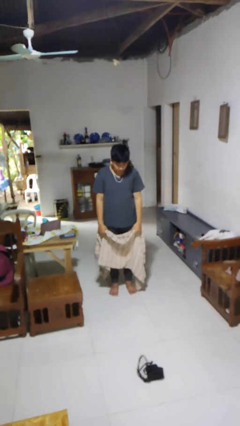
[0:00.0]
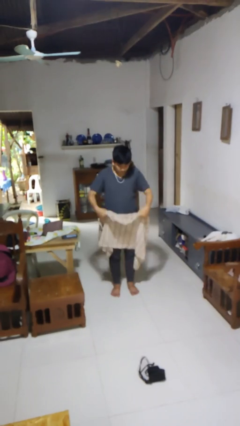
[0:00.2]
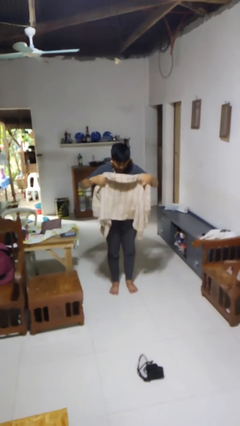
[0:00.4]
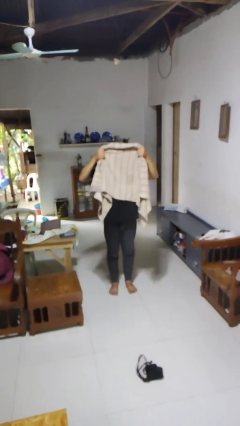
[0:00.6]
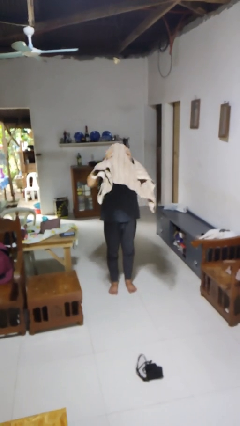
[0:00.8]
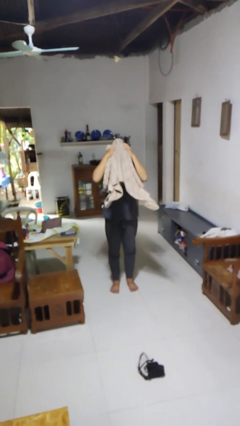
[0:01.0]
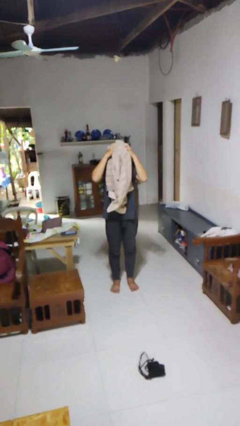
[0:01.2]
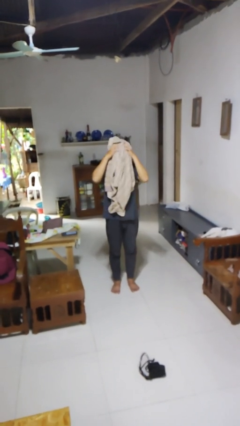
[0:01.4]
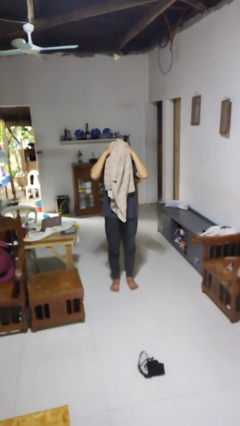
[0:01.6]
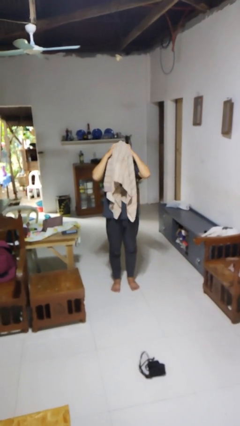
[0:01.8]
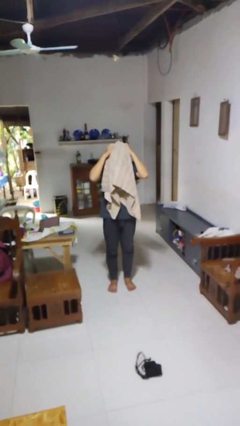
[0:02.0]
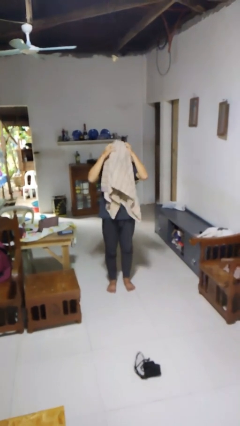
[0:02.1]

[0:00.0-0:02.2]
person dries hair with towel

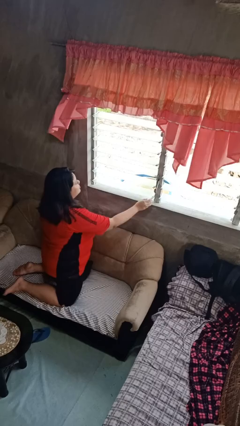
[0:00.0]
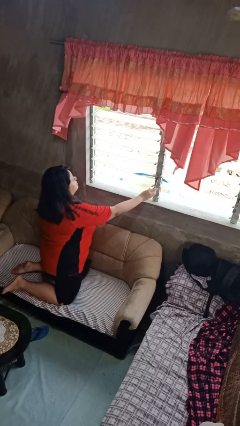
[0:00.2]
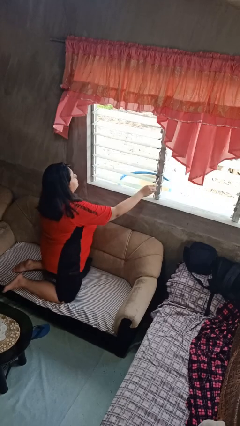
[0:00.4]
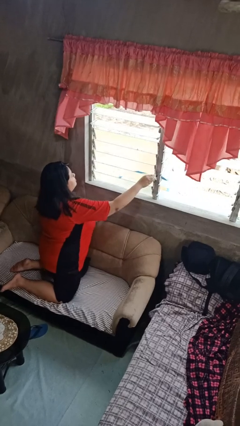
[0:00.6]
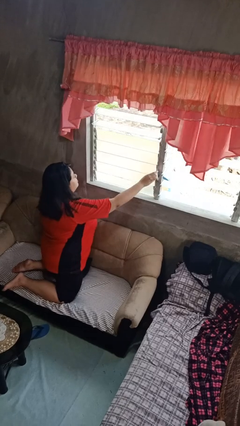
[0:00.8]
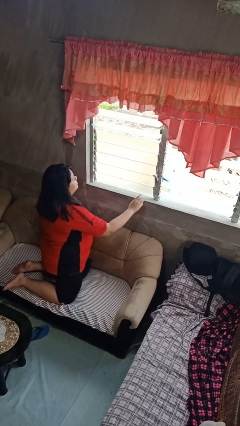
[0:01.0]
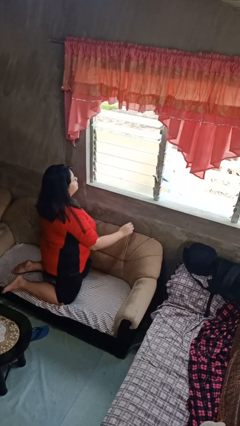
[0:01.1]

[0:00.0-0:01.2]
person closes home window

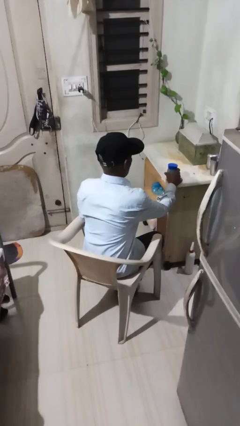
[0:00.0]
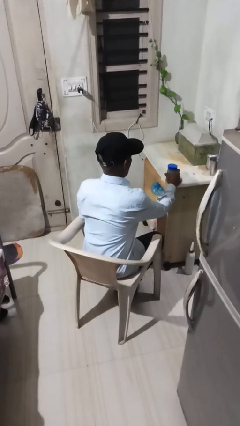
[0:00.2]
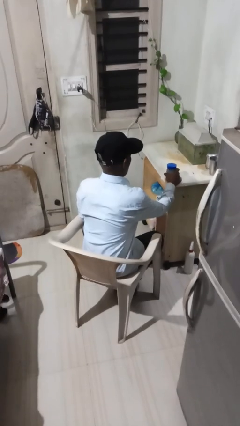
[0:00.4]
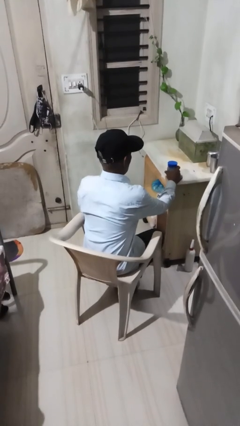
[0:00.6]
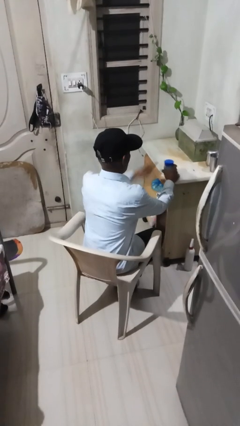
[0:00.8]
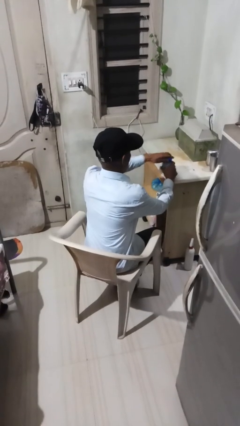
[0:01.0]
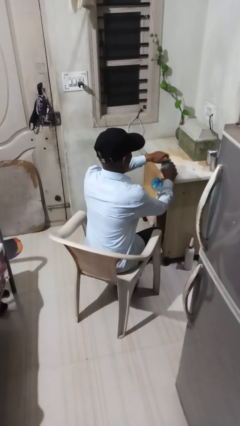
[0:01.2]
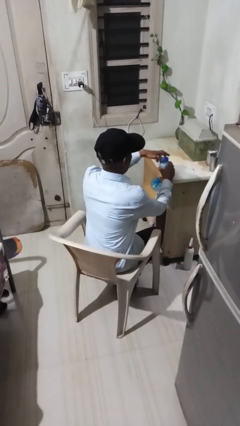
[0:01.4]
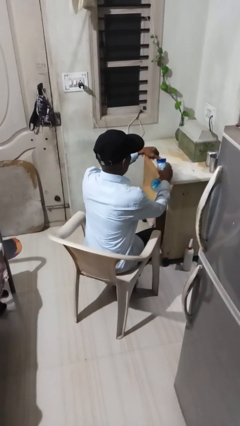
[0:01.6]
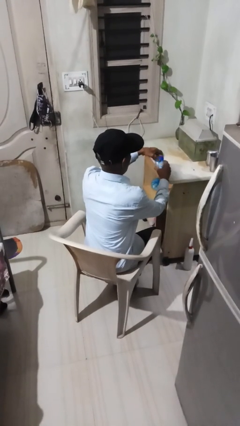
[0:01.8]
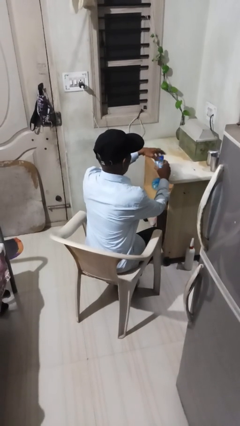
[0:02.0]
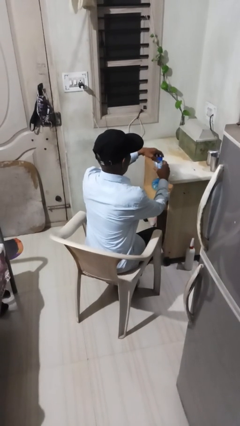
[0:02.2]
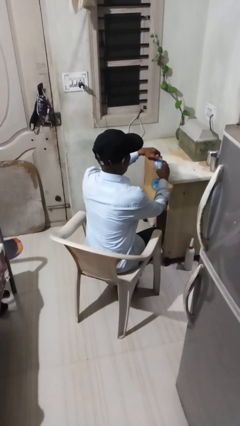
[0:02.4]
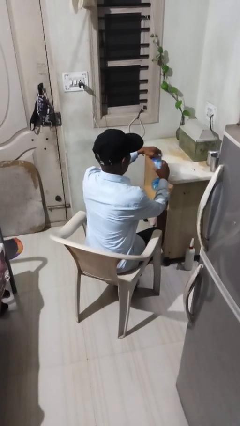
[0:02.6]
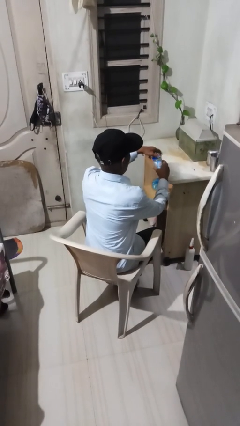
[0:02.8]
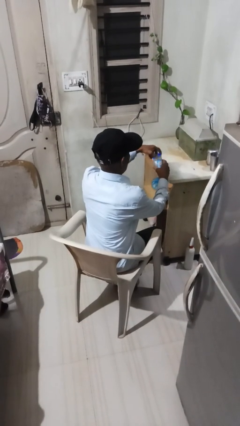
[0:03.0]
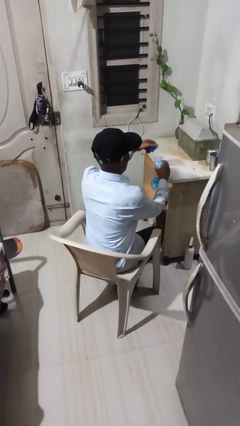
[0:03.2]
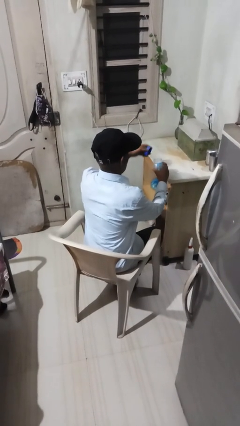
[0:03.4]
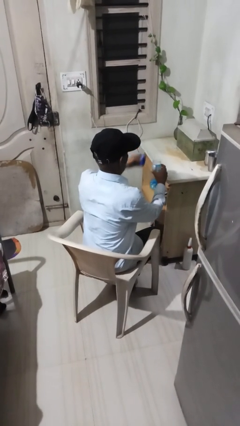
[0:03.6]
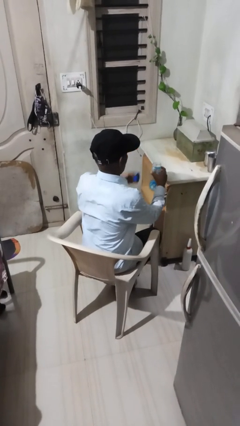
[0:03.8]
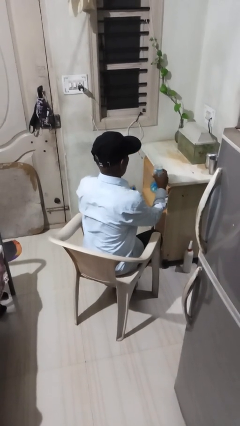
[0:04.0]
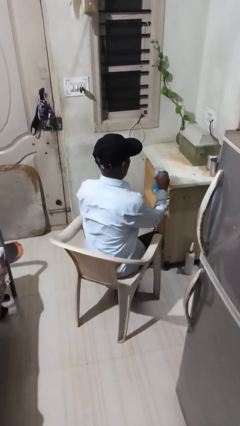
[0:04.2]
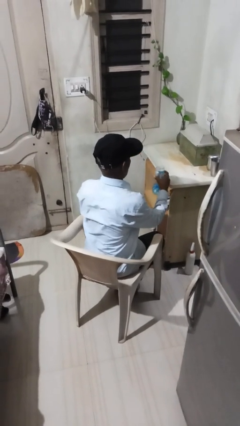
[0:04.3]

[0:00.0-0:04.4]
person opens jar

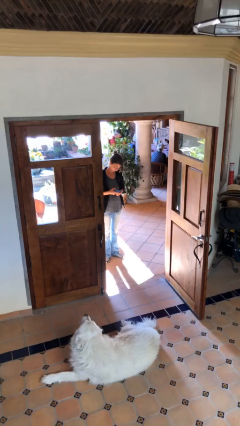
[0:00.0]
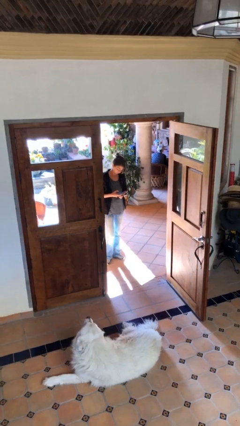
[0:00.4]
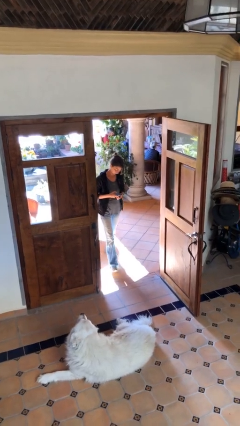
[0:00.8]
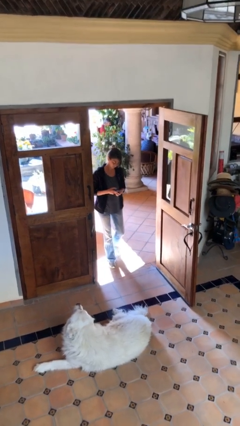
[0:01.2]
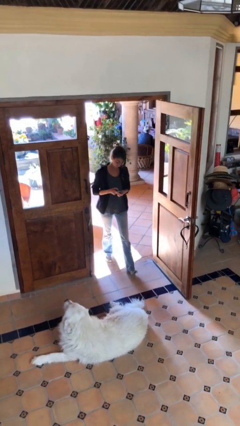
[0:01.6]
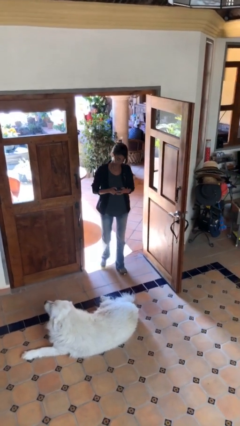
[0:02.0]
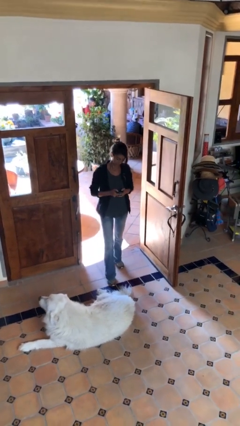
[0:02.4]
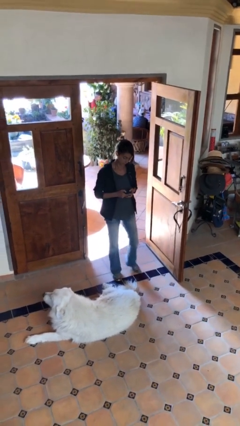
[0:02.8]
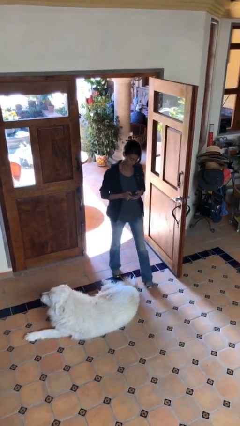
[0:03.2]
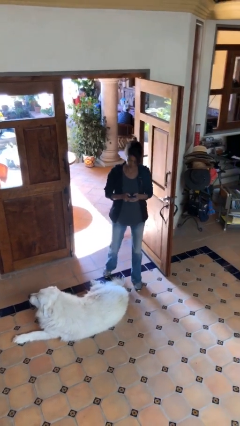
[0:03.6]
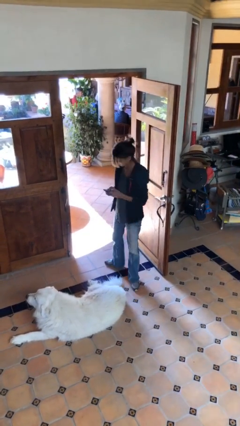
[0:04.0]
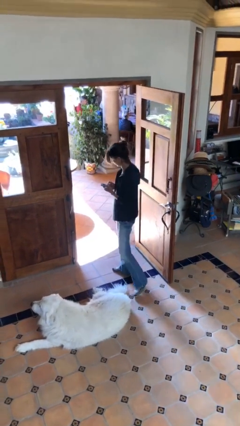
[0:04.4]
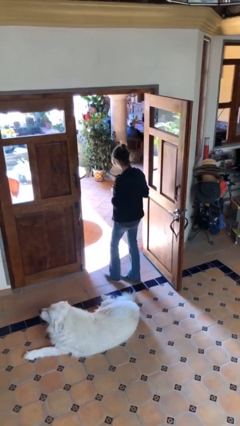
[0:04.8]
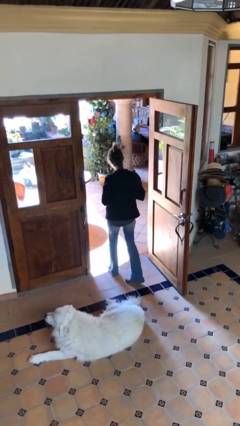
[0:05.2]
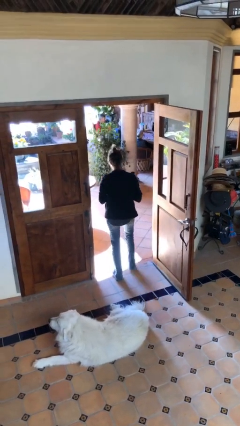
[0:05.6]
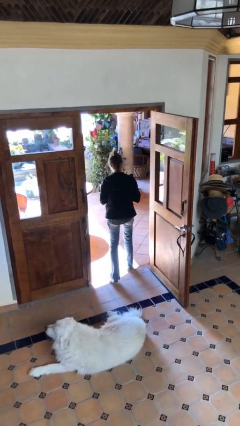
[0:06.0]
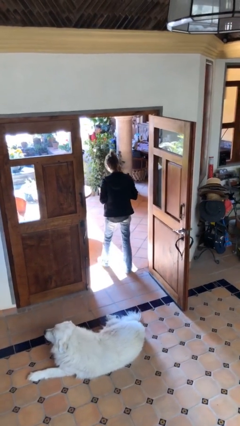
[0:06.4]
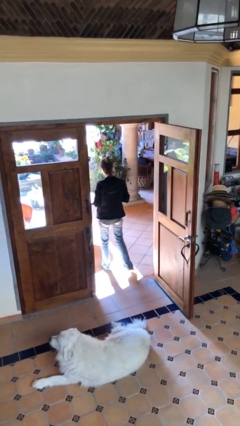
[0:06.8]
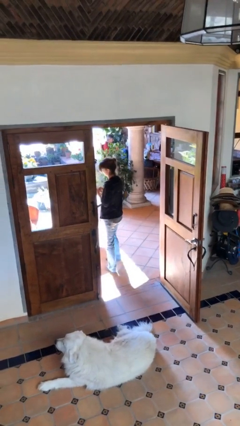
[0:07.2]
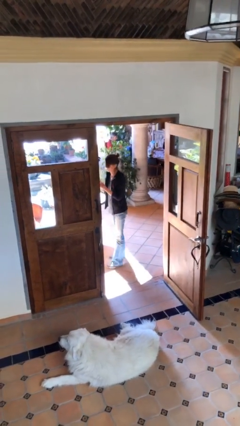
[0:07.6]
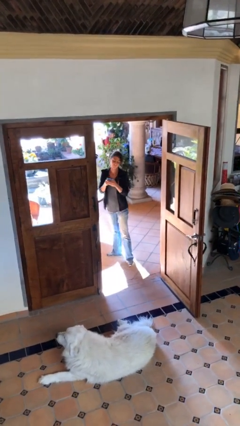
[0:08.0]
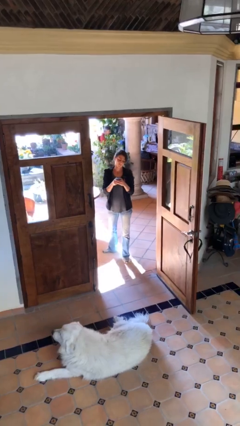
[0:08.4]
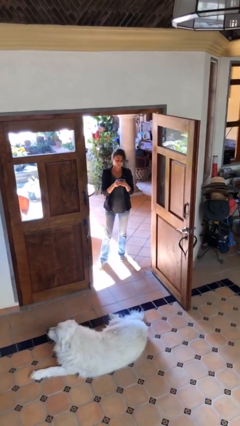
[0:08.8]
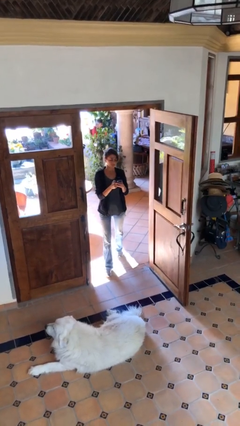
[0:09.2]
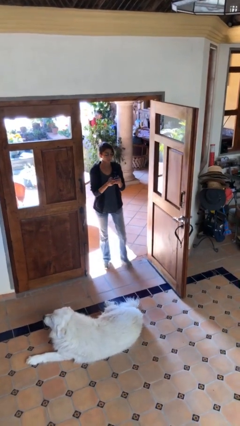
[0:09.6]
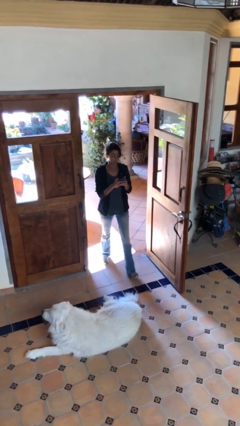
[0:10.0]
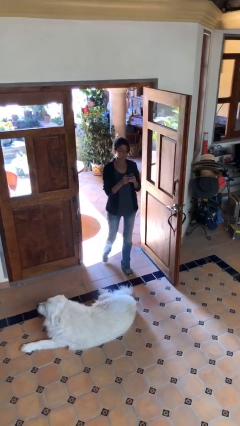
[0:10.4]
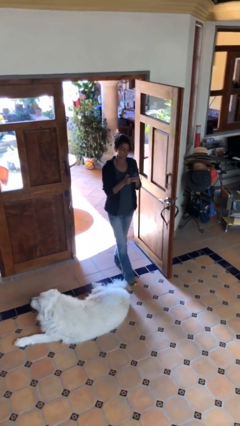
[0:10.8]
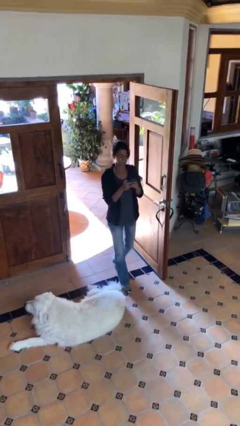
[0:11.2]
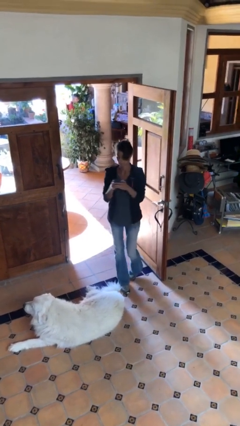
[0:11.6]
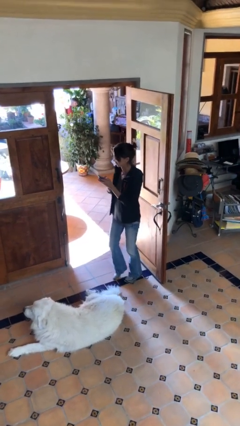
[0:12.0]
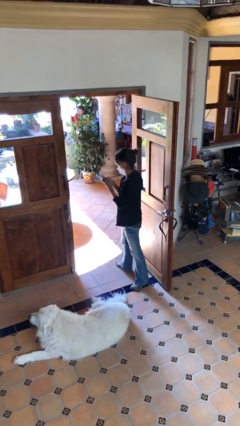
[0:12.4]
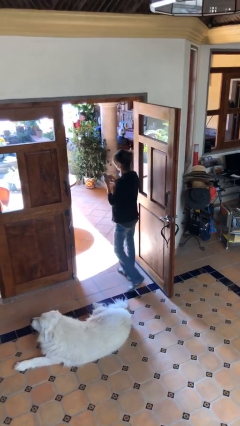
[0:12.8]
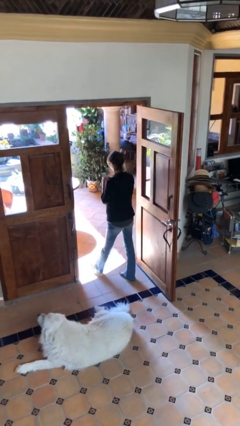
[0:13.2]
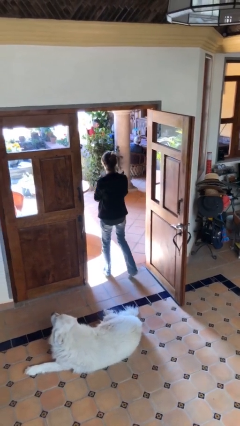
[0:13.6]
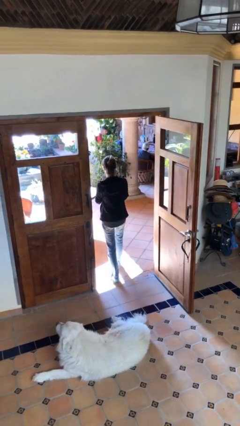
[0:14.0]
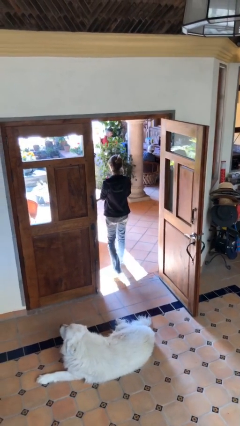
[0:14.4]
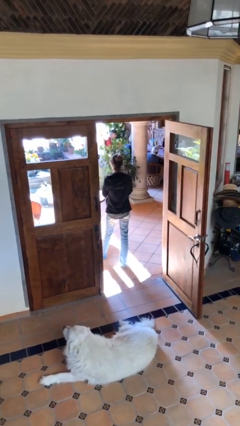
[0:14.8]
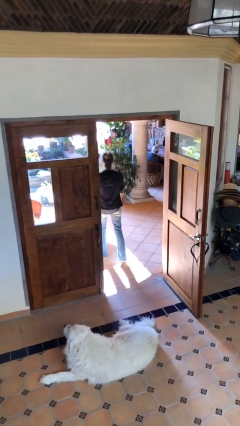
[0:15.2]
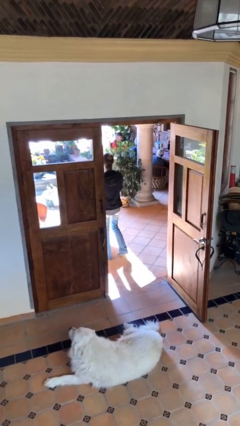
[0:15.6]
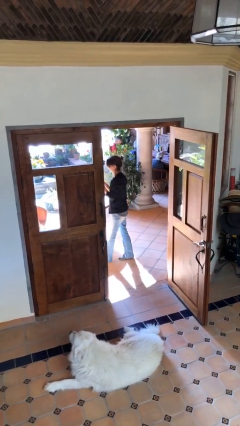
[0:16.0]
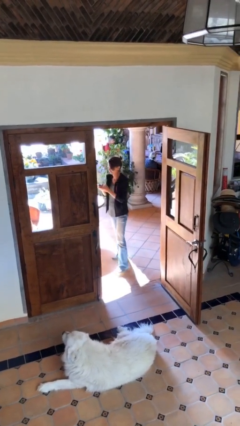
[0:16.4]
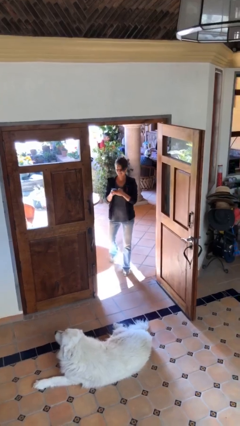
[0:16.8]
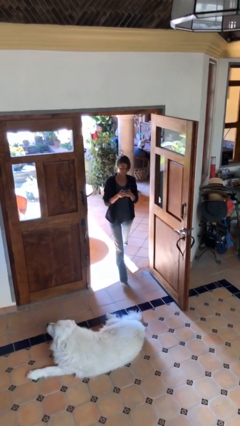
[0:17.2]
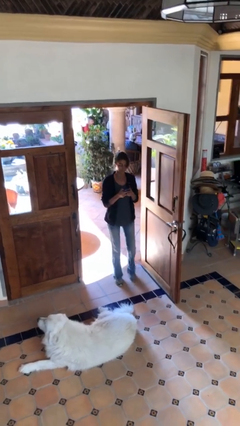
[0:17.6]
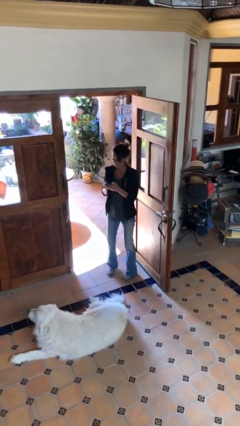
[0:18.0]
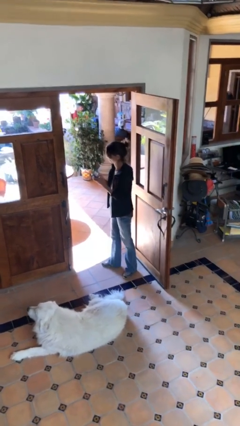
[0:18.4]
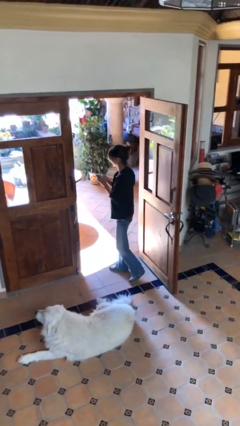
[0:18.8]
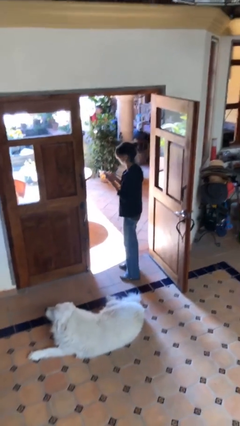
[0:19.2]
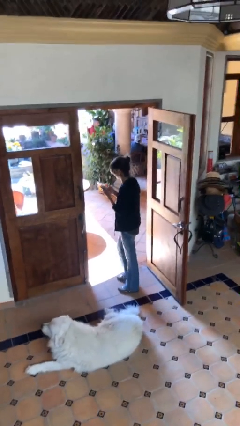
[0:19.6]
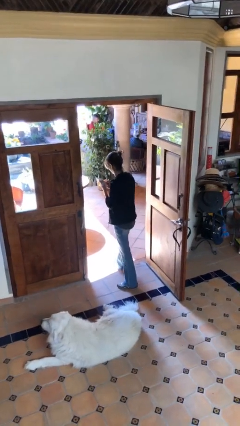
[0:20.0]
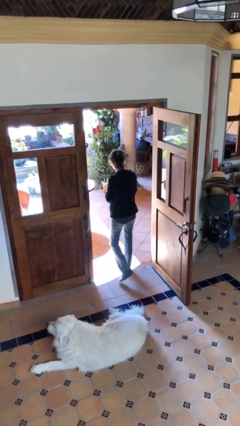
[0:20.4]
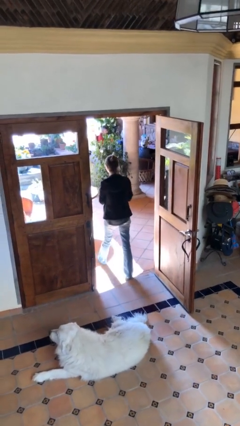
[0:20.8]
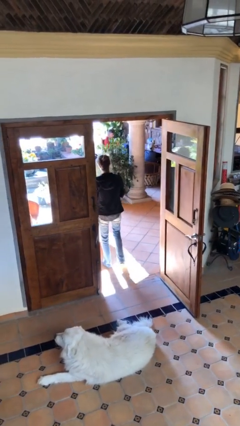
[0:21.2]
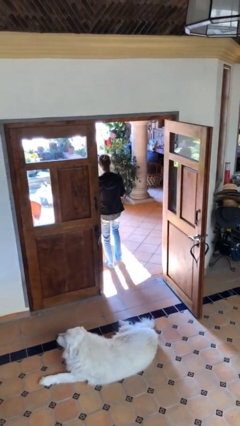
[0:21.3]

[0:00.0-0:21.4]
person texts on phone
